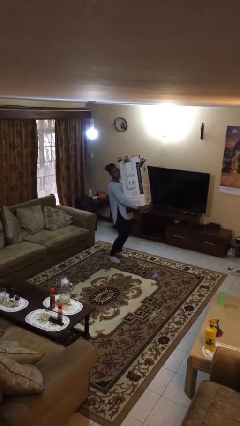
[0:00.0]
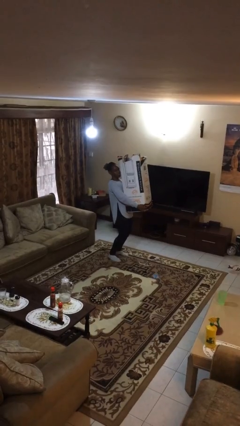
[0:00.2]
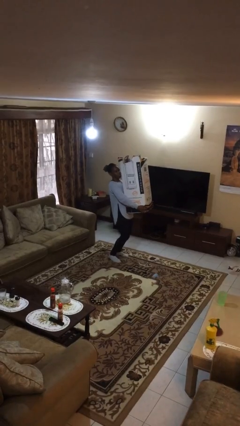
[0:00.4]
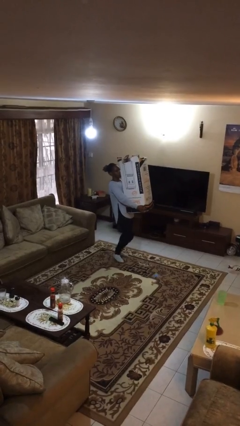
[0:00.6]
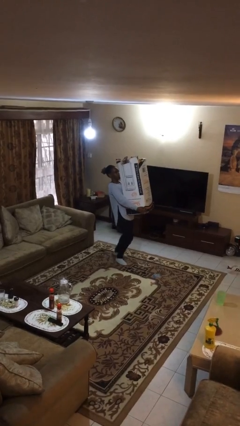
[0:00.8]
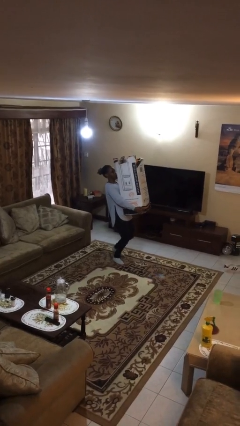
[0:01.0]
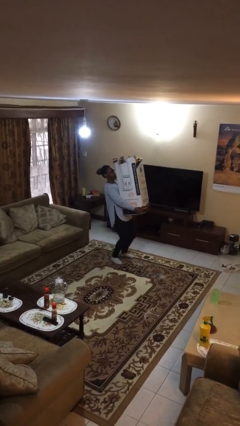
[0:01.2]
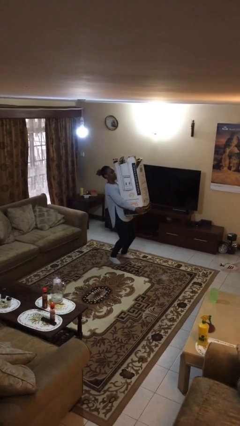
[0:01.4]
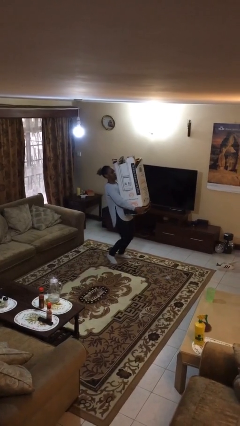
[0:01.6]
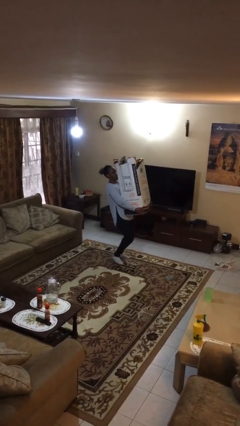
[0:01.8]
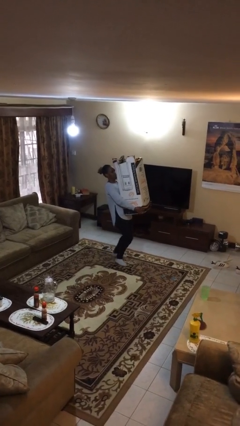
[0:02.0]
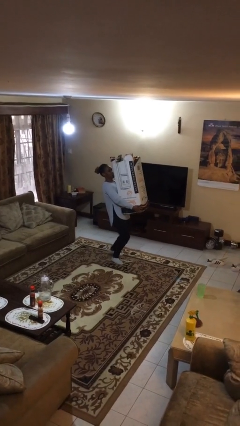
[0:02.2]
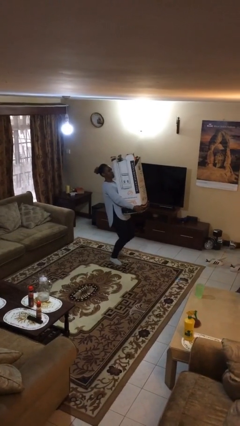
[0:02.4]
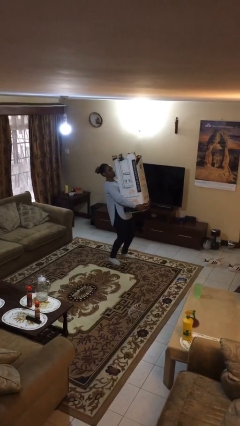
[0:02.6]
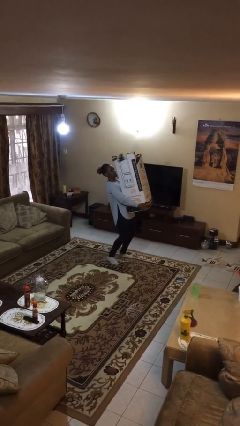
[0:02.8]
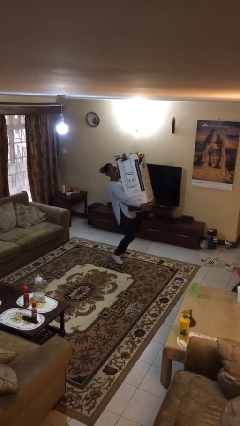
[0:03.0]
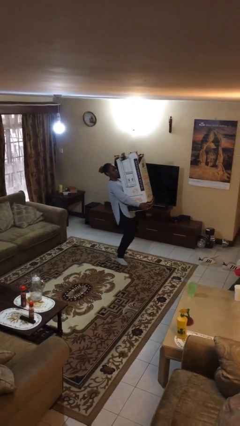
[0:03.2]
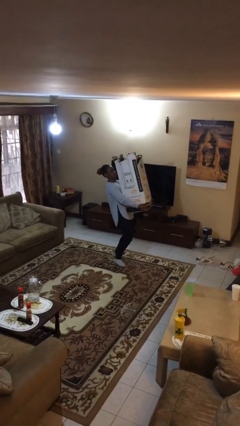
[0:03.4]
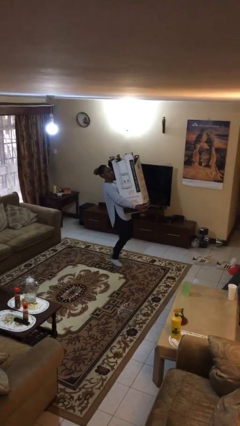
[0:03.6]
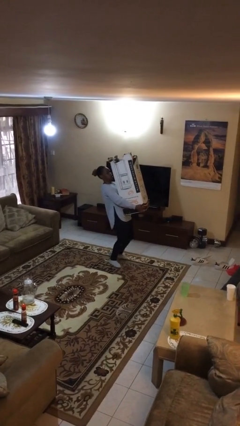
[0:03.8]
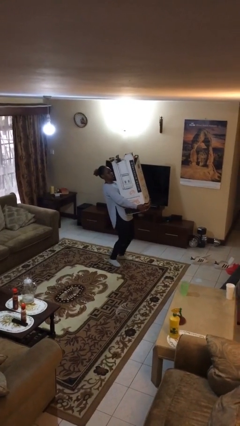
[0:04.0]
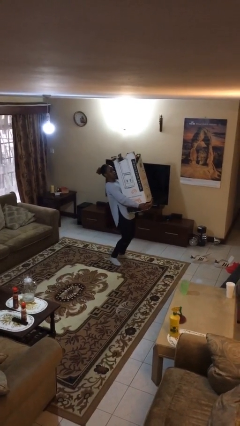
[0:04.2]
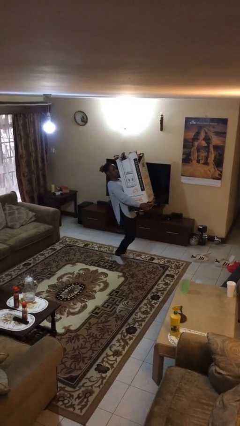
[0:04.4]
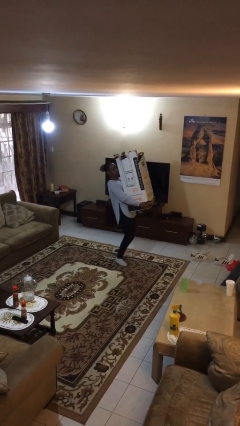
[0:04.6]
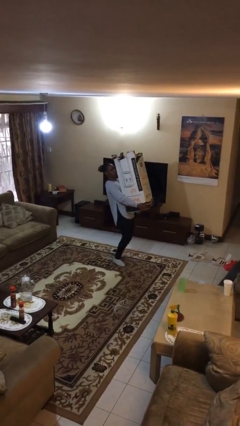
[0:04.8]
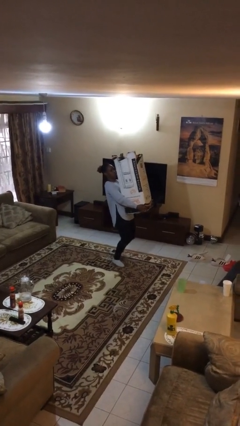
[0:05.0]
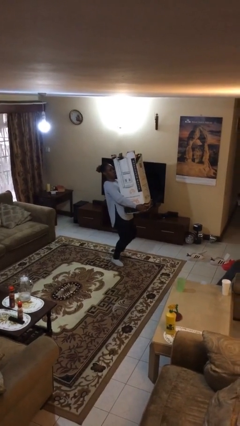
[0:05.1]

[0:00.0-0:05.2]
person carries heavy object

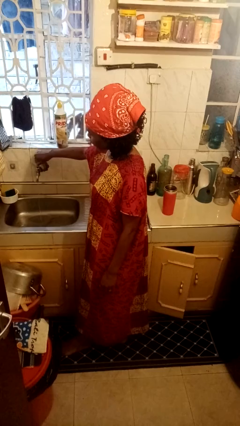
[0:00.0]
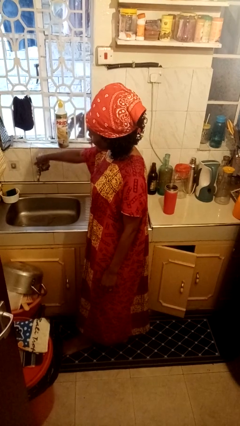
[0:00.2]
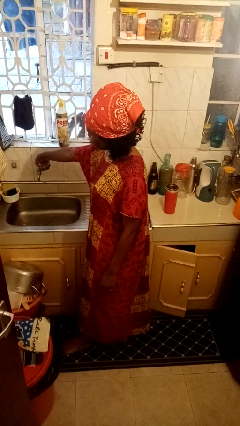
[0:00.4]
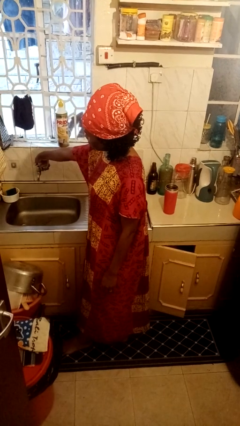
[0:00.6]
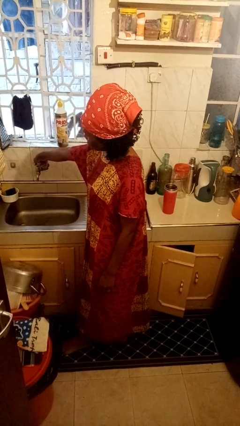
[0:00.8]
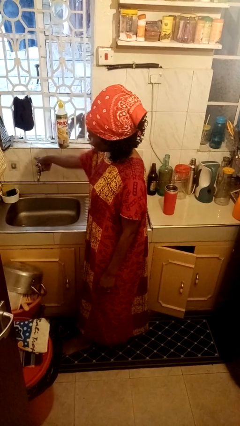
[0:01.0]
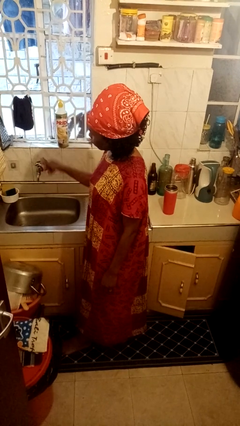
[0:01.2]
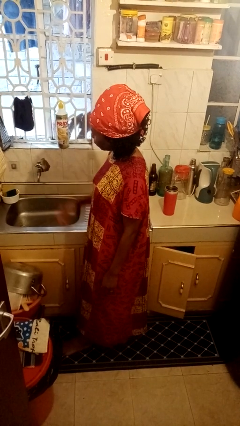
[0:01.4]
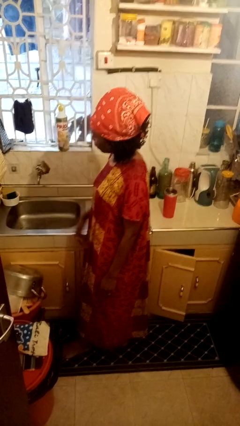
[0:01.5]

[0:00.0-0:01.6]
person turns off faucet

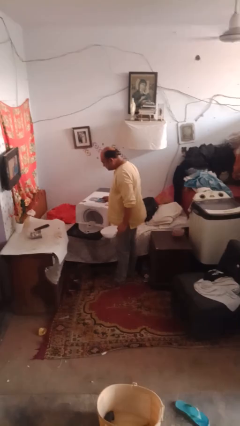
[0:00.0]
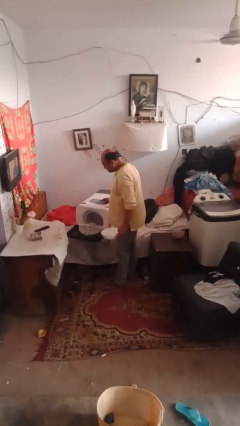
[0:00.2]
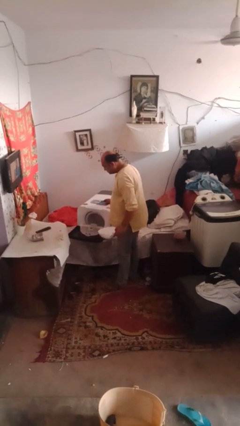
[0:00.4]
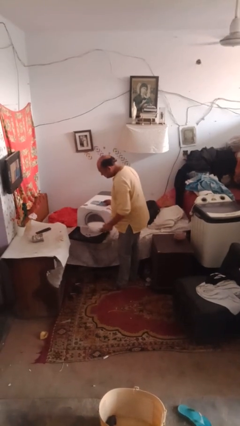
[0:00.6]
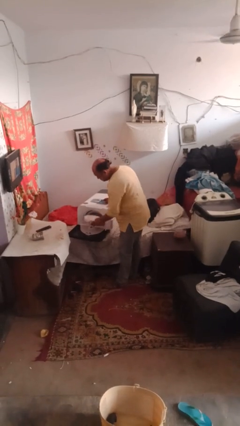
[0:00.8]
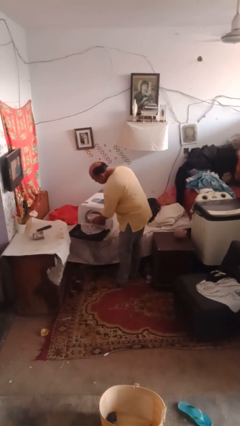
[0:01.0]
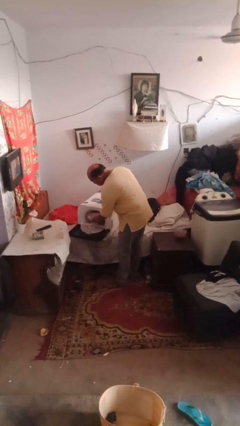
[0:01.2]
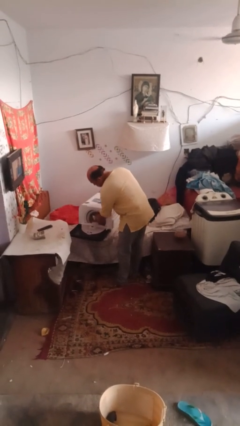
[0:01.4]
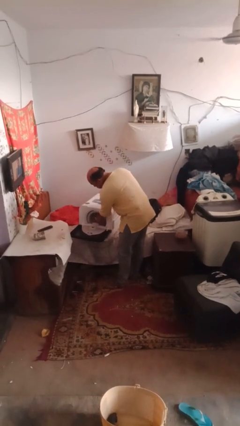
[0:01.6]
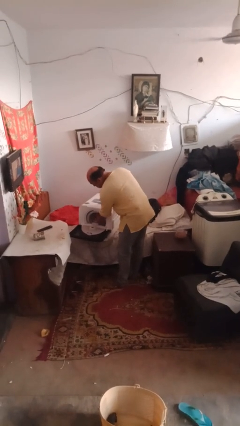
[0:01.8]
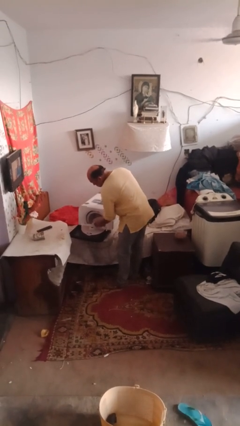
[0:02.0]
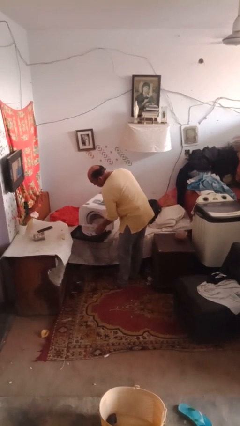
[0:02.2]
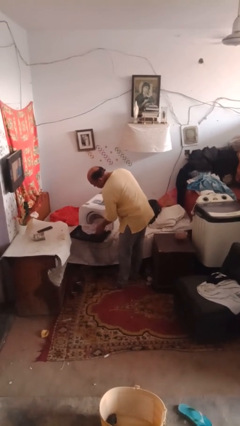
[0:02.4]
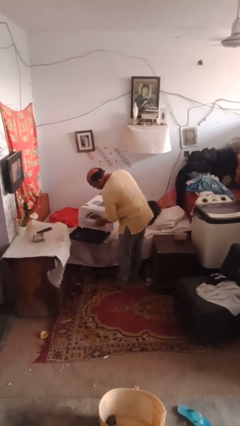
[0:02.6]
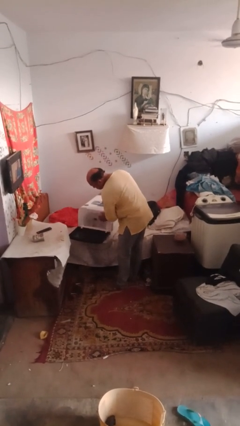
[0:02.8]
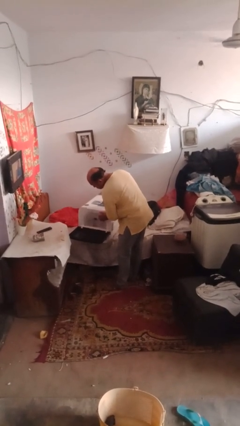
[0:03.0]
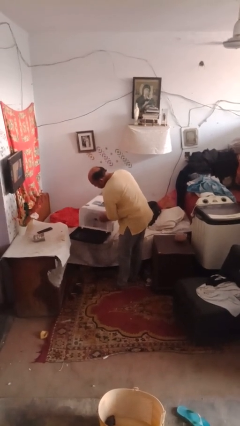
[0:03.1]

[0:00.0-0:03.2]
person loads dishwasher

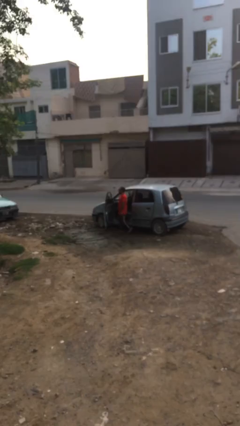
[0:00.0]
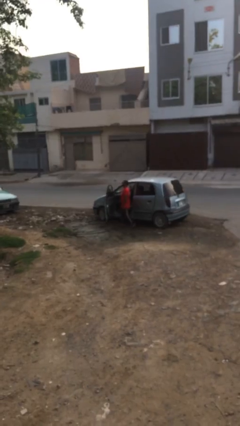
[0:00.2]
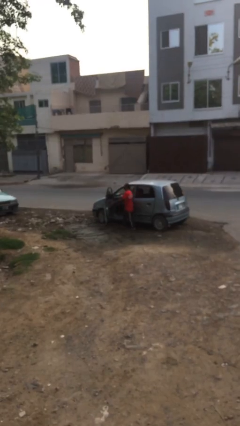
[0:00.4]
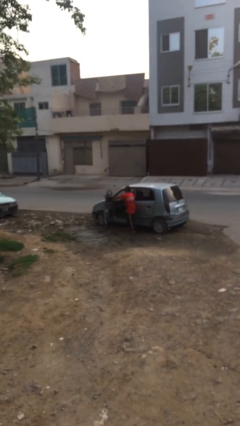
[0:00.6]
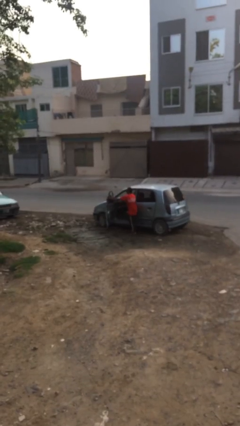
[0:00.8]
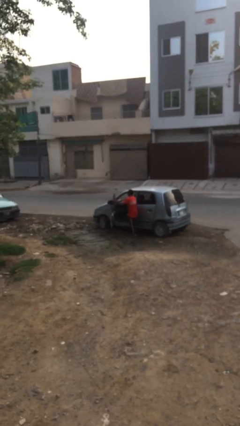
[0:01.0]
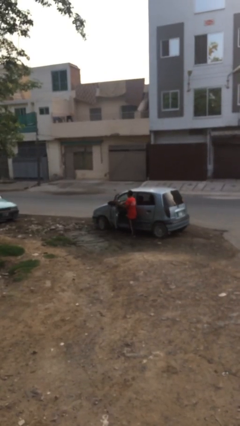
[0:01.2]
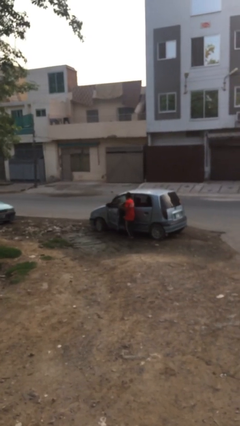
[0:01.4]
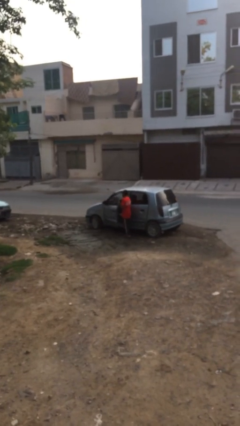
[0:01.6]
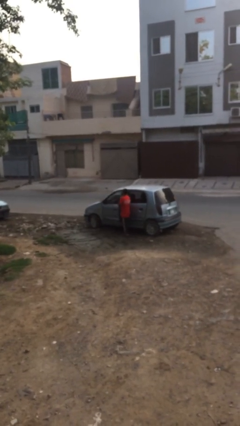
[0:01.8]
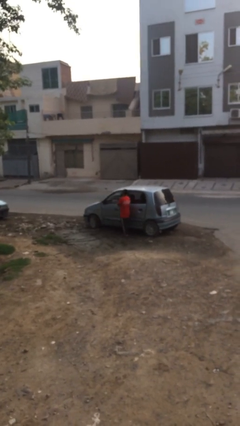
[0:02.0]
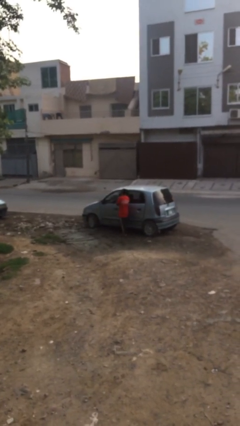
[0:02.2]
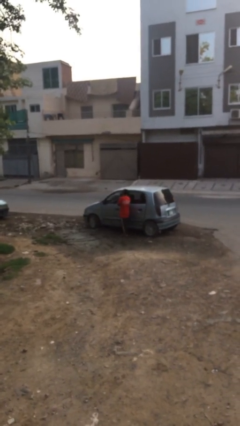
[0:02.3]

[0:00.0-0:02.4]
person closes car door

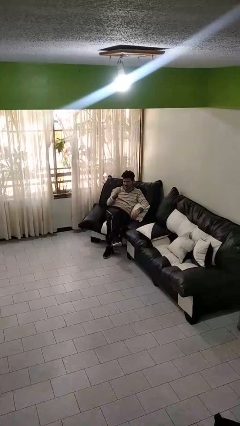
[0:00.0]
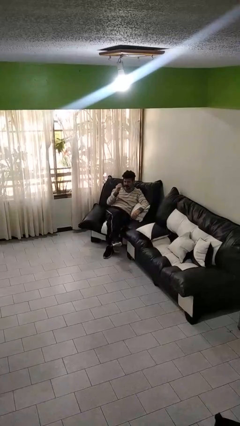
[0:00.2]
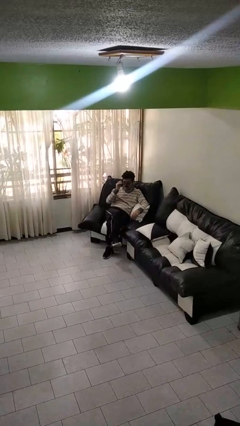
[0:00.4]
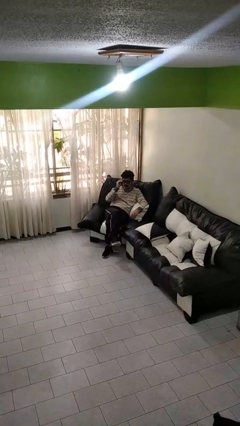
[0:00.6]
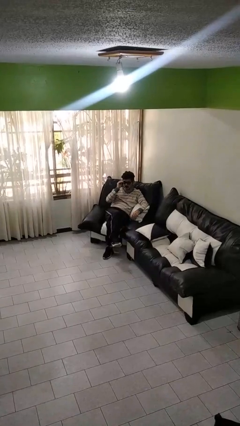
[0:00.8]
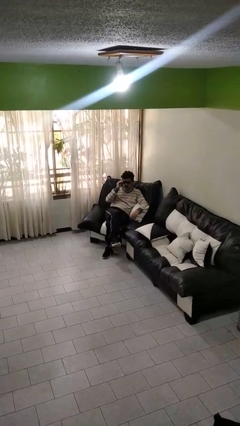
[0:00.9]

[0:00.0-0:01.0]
person puts on sunglasses

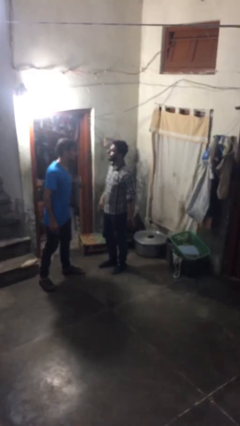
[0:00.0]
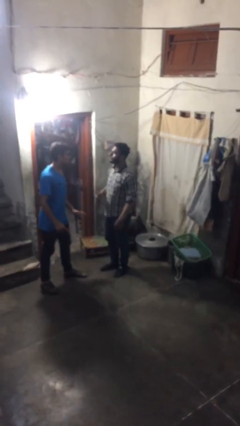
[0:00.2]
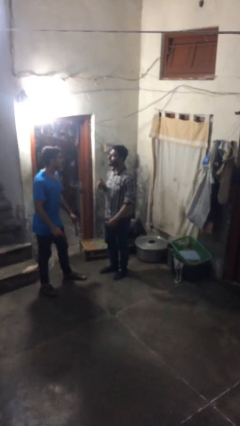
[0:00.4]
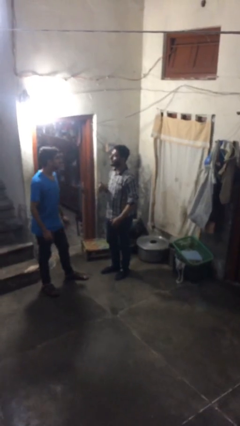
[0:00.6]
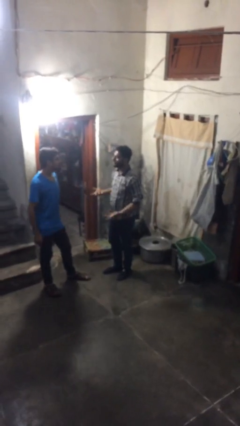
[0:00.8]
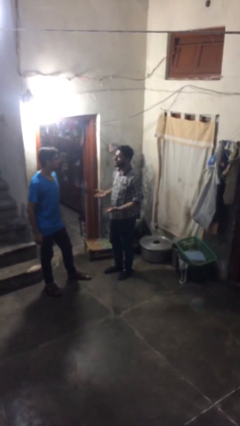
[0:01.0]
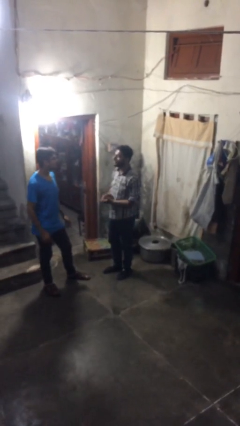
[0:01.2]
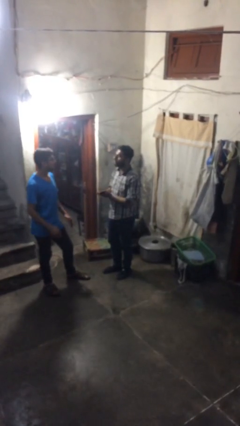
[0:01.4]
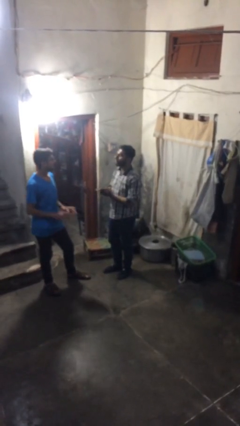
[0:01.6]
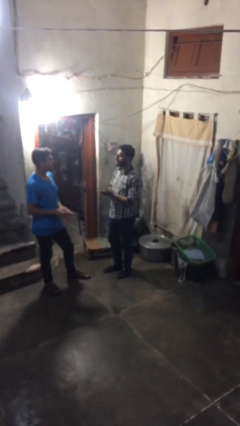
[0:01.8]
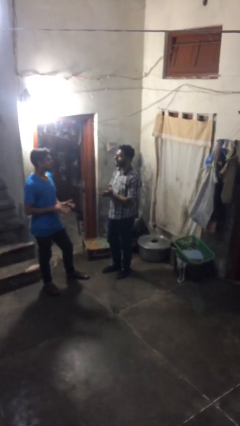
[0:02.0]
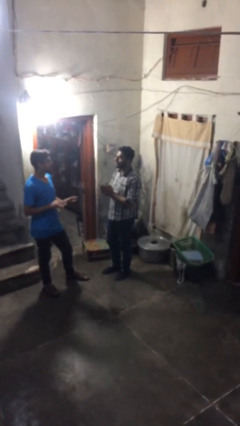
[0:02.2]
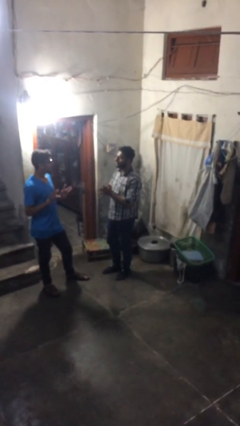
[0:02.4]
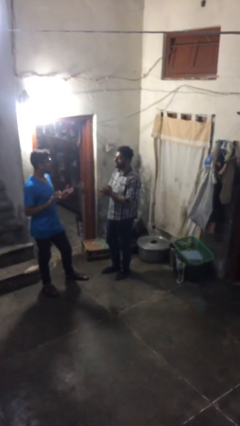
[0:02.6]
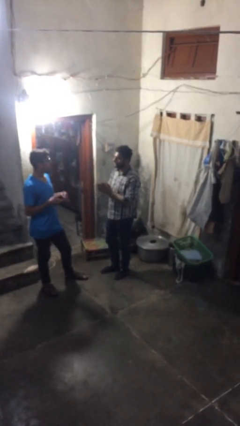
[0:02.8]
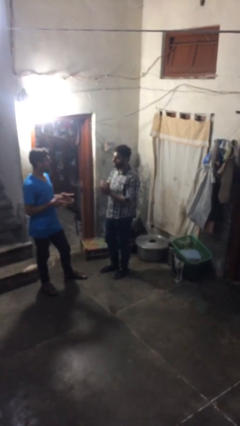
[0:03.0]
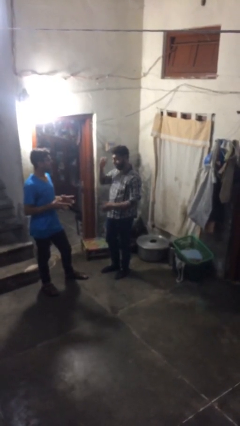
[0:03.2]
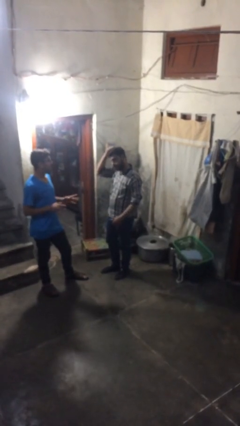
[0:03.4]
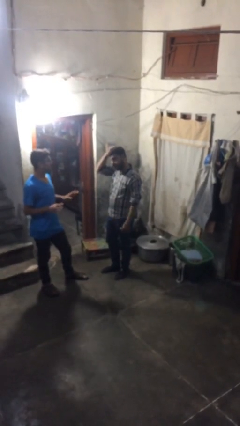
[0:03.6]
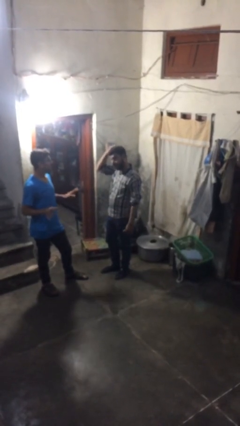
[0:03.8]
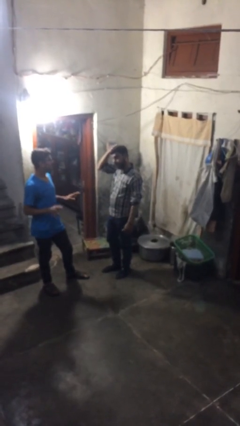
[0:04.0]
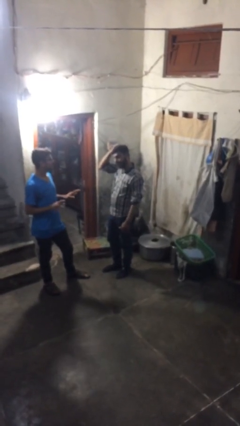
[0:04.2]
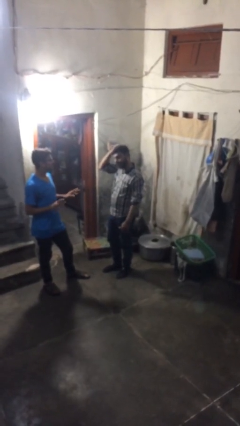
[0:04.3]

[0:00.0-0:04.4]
person talks to person
